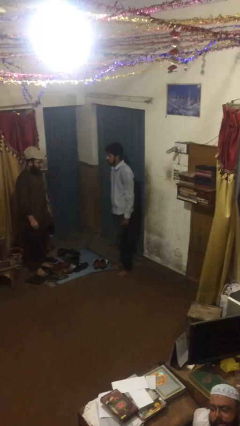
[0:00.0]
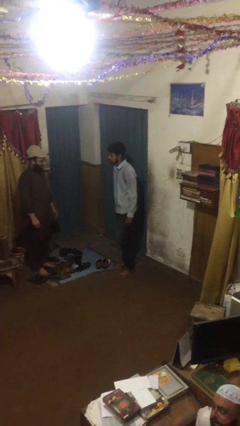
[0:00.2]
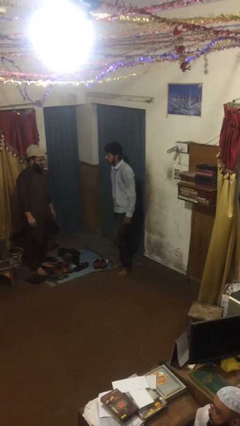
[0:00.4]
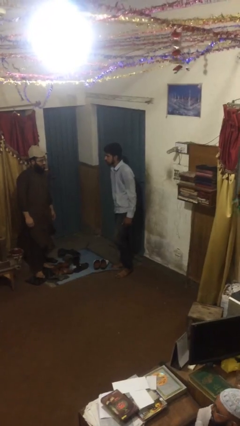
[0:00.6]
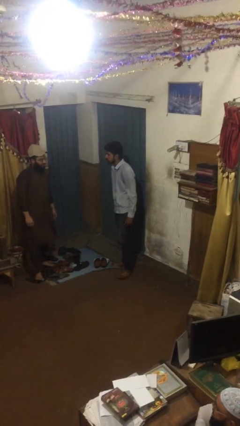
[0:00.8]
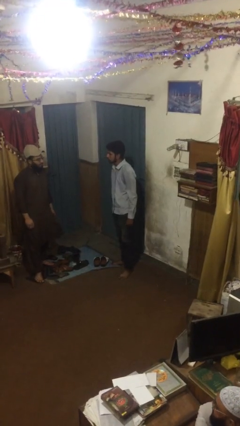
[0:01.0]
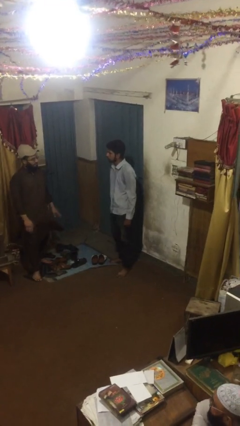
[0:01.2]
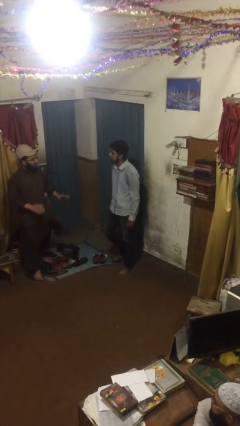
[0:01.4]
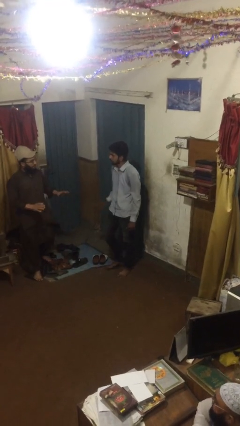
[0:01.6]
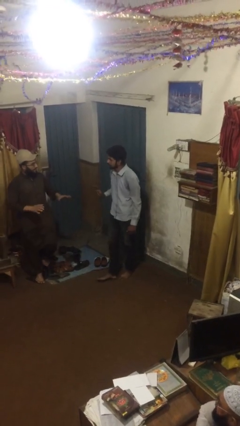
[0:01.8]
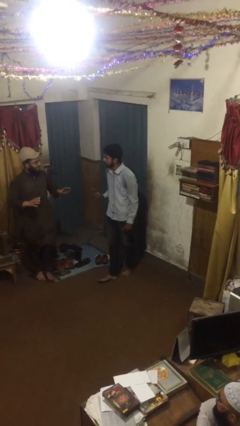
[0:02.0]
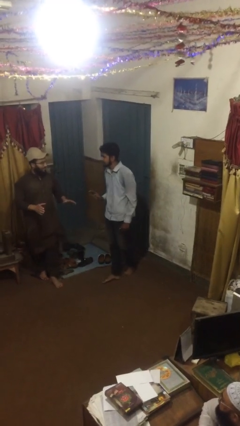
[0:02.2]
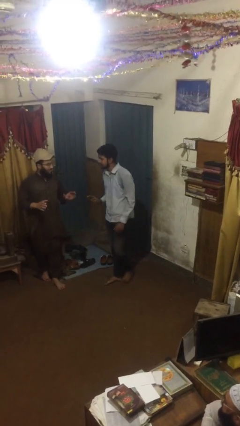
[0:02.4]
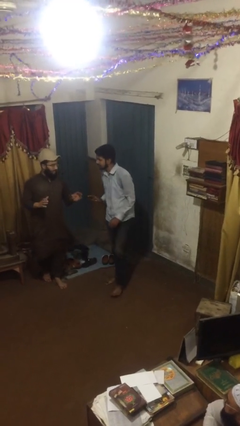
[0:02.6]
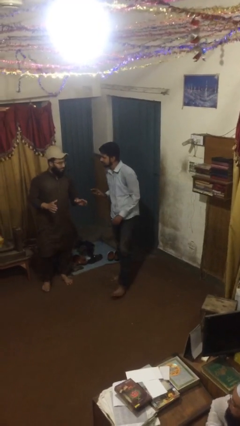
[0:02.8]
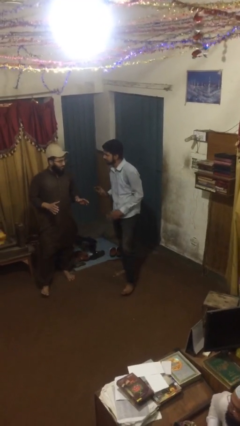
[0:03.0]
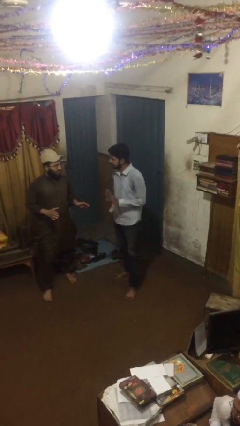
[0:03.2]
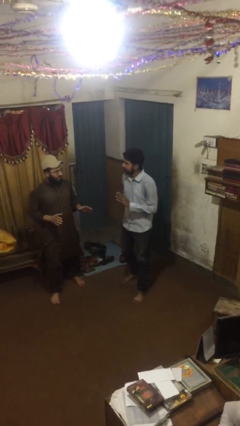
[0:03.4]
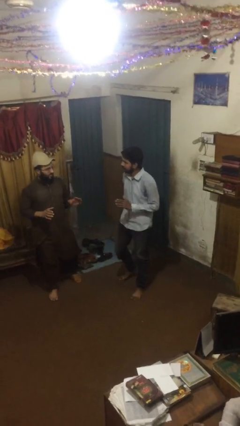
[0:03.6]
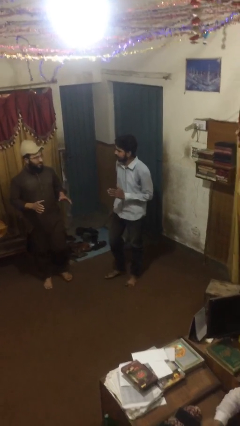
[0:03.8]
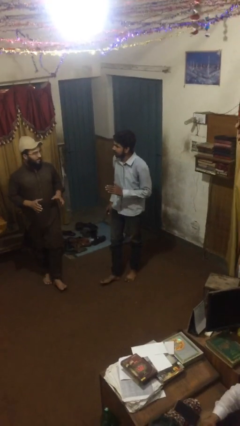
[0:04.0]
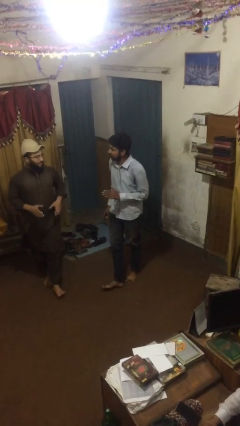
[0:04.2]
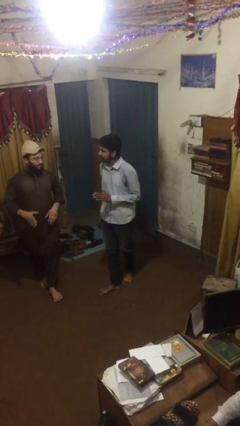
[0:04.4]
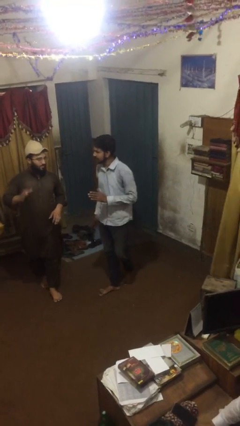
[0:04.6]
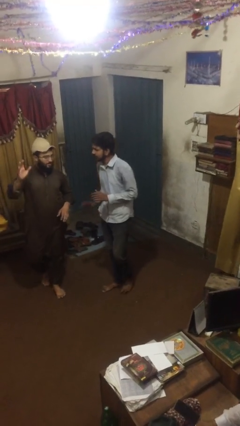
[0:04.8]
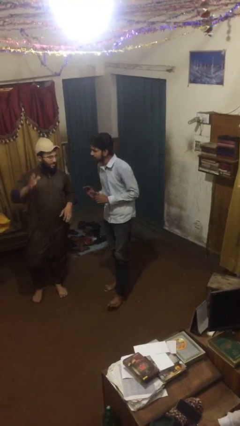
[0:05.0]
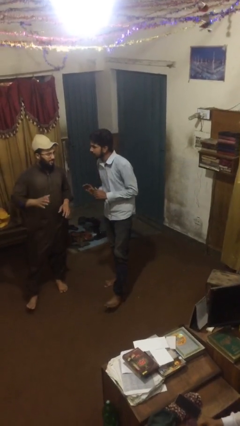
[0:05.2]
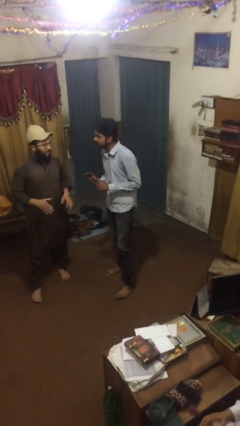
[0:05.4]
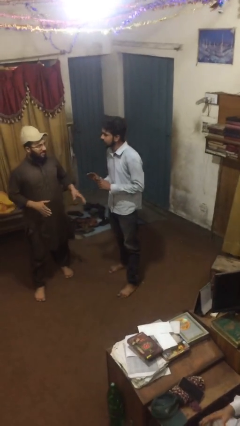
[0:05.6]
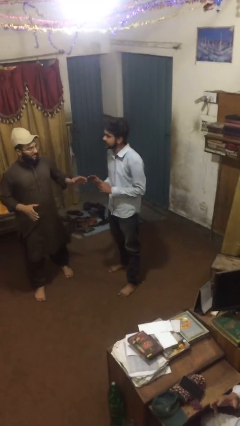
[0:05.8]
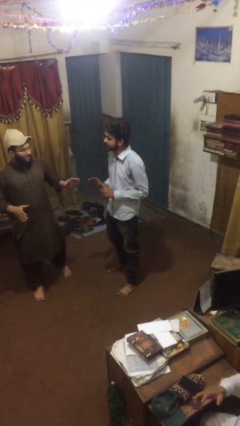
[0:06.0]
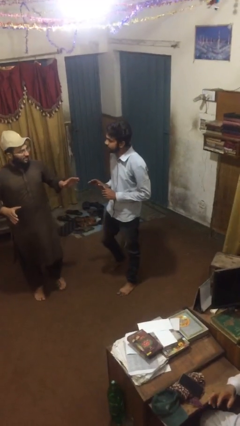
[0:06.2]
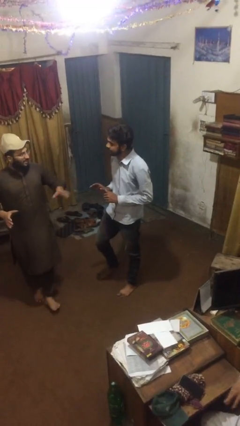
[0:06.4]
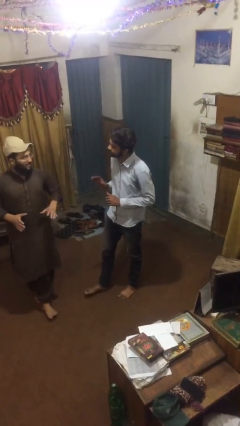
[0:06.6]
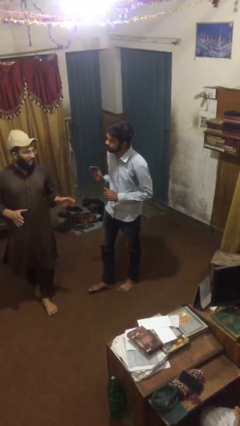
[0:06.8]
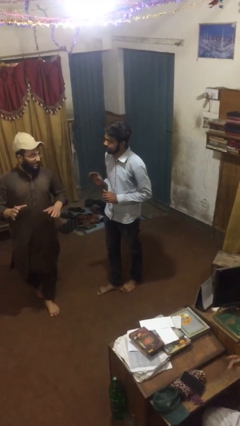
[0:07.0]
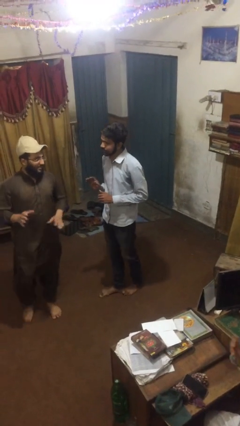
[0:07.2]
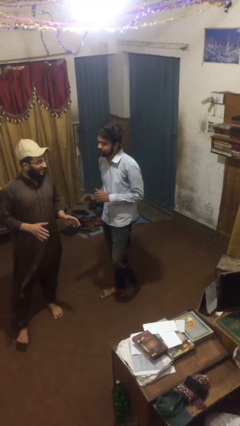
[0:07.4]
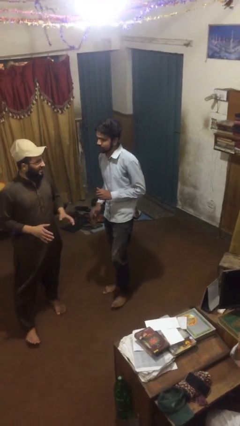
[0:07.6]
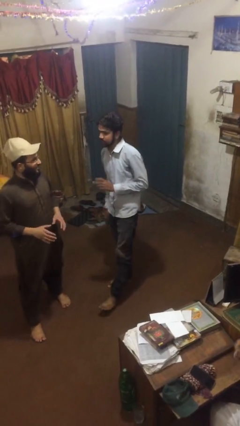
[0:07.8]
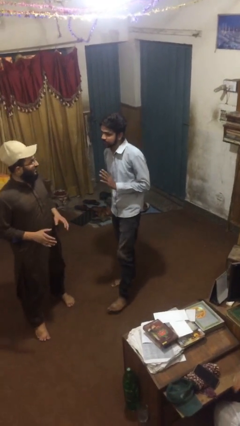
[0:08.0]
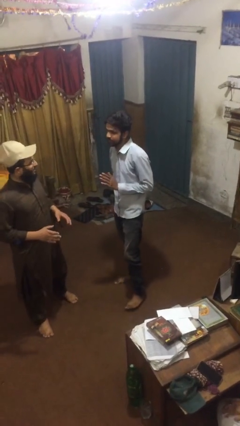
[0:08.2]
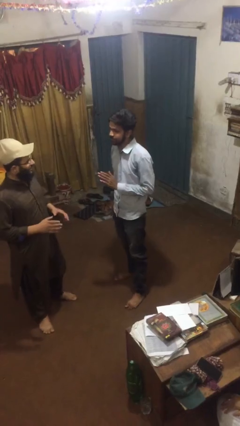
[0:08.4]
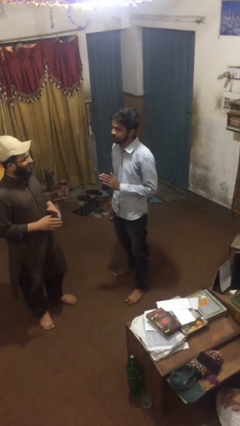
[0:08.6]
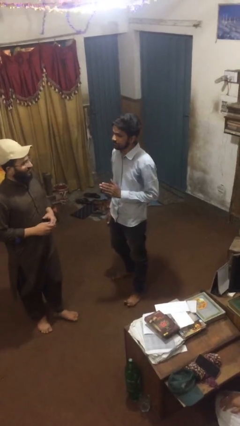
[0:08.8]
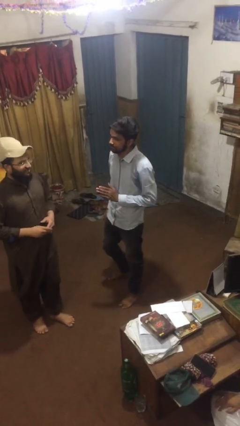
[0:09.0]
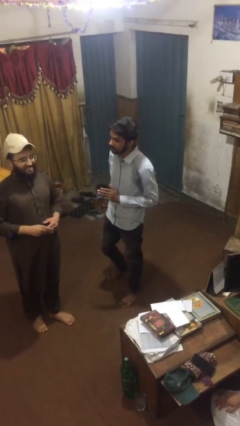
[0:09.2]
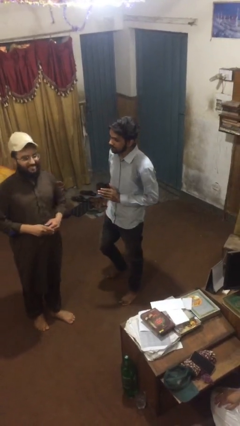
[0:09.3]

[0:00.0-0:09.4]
person talks to person

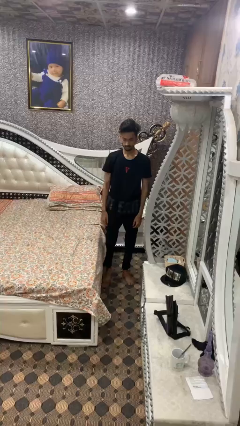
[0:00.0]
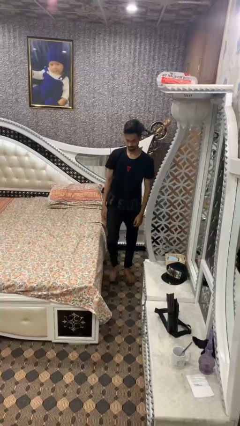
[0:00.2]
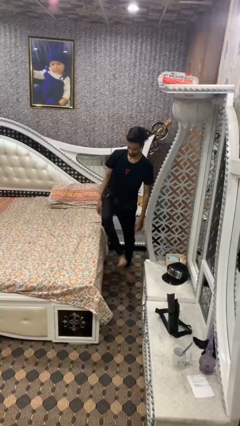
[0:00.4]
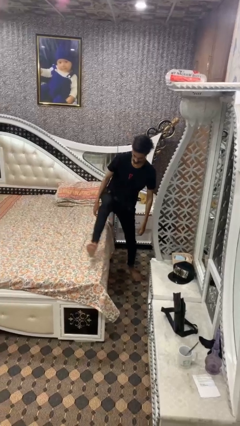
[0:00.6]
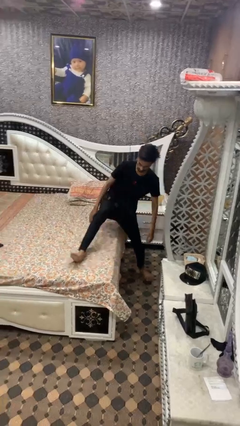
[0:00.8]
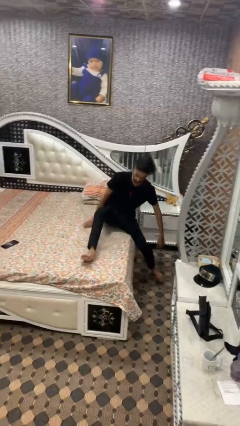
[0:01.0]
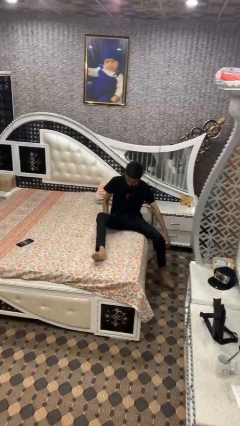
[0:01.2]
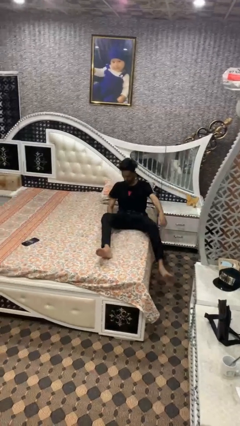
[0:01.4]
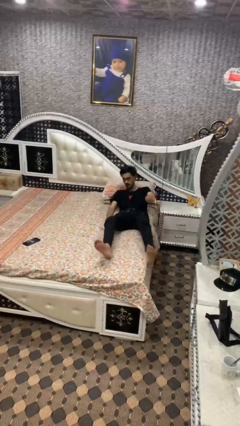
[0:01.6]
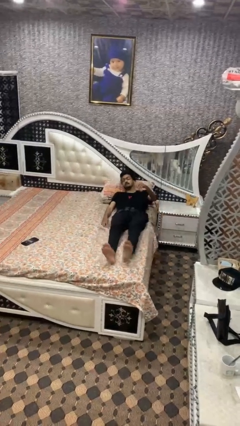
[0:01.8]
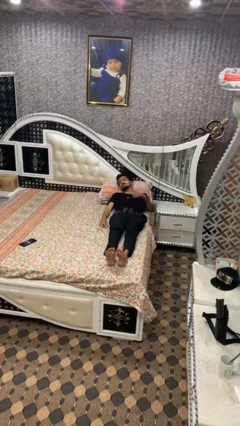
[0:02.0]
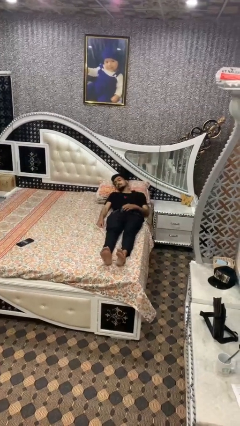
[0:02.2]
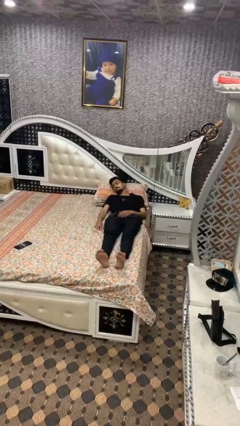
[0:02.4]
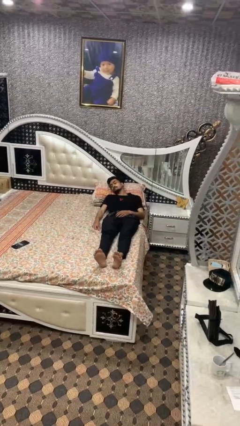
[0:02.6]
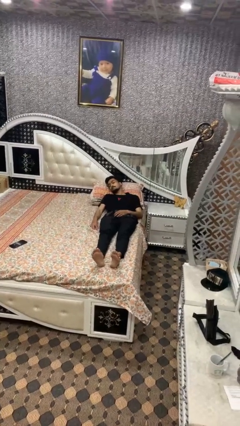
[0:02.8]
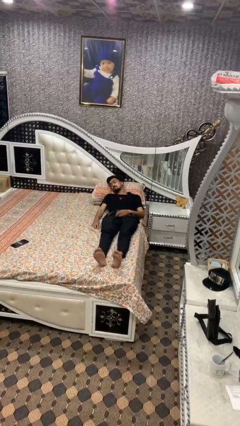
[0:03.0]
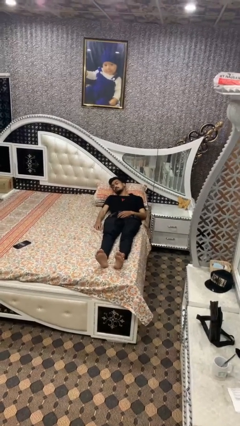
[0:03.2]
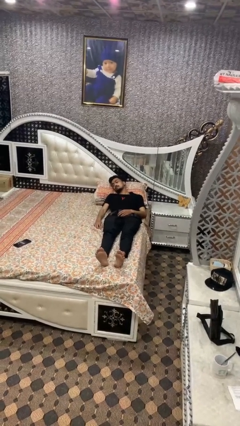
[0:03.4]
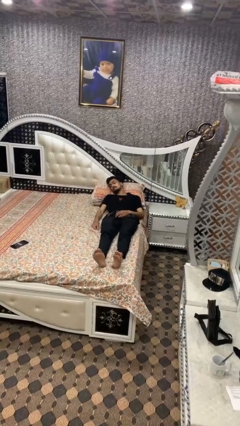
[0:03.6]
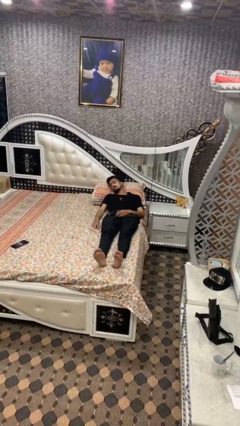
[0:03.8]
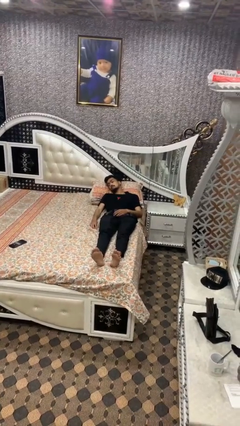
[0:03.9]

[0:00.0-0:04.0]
person lies down on bed

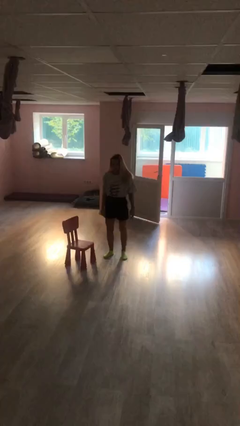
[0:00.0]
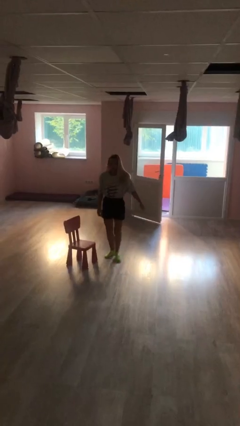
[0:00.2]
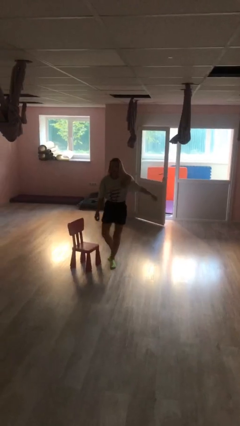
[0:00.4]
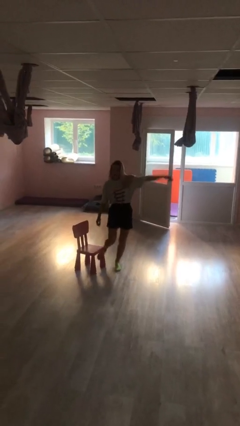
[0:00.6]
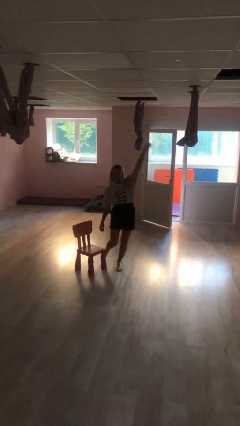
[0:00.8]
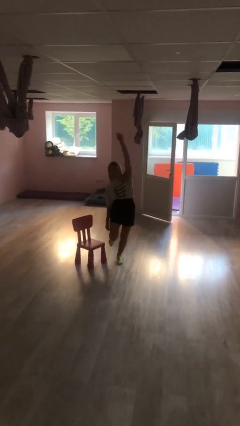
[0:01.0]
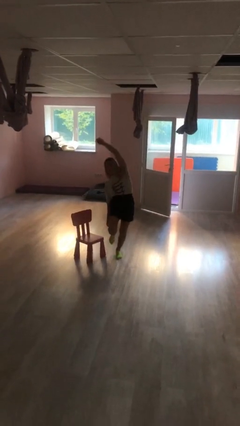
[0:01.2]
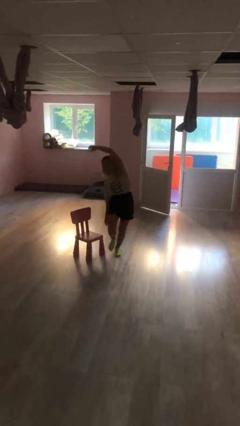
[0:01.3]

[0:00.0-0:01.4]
person trips on object on floor

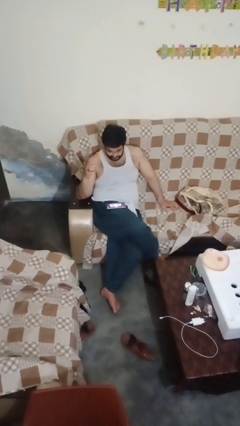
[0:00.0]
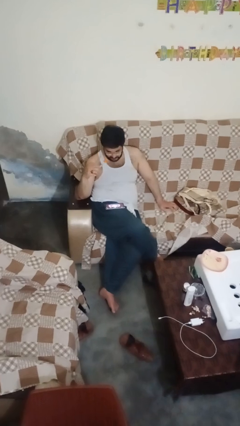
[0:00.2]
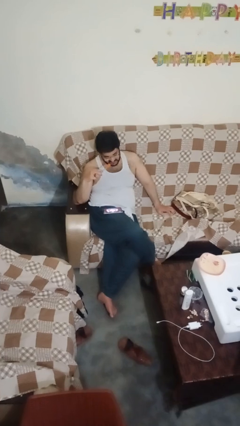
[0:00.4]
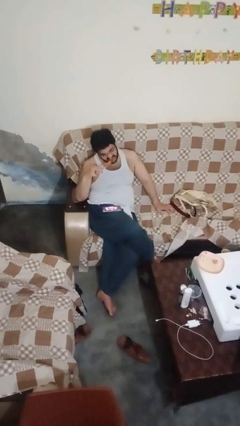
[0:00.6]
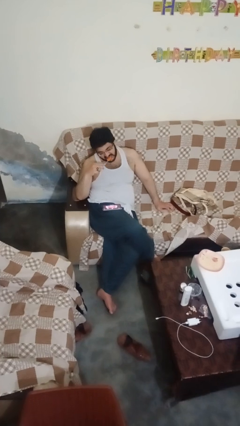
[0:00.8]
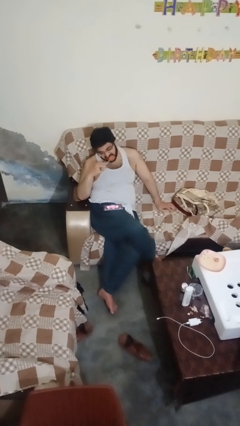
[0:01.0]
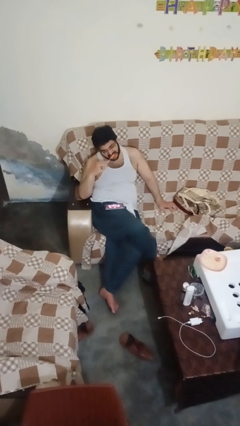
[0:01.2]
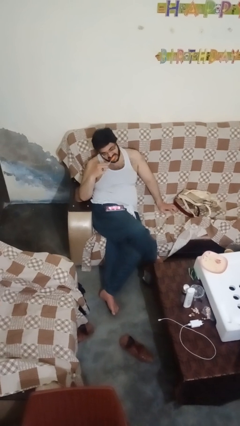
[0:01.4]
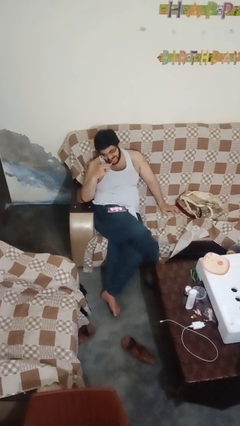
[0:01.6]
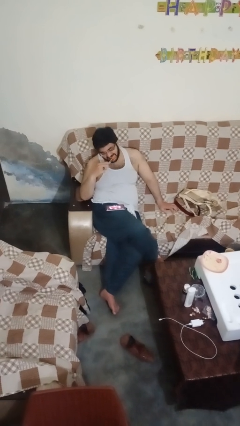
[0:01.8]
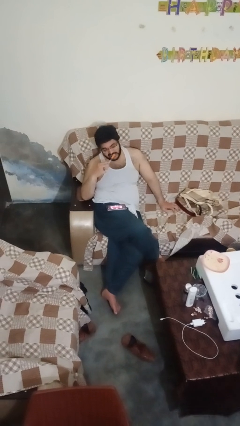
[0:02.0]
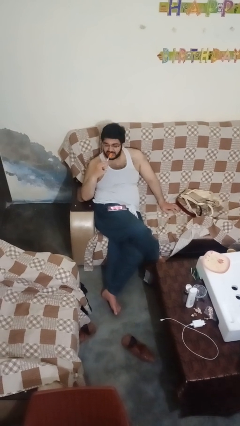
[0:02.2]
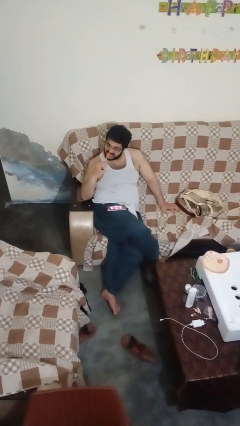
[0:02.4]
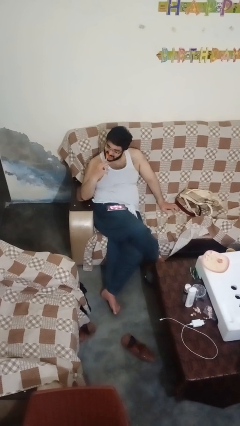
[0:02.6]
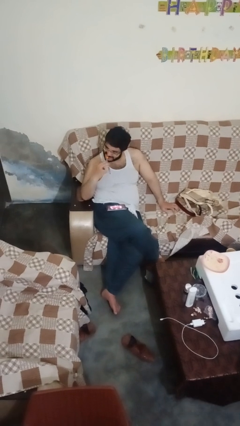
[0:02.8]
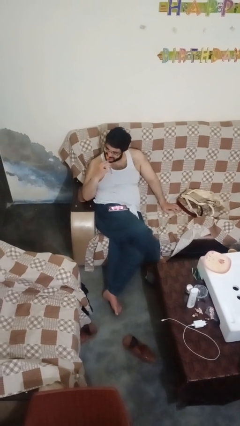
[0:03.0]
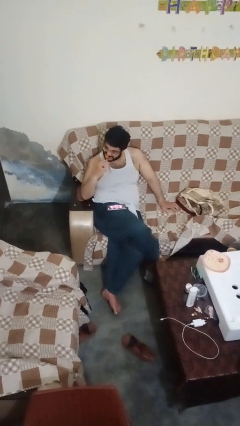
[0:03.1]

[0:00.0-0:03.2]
person brushes teeth
